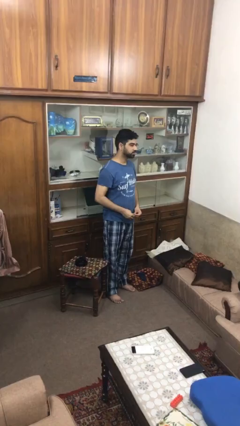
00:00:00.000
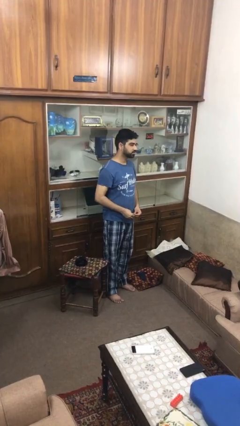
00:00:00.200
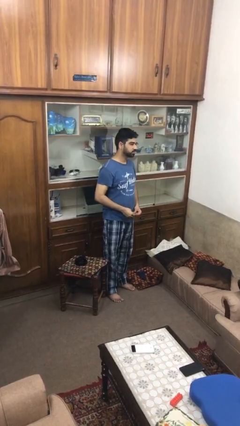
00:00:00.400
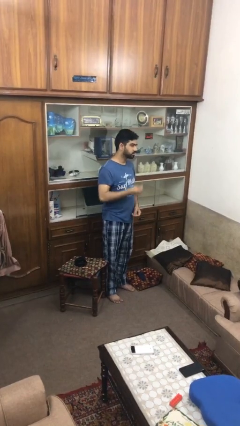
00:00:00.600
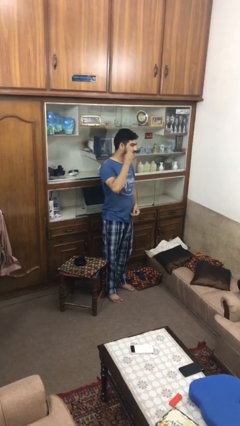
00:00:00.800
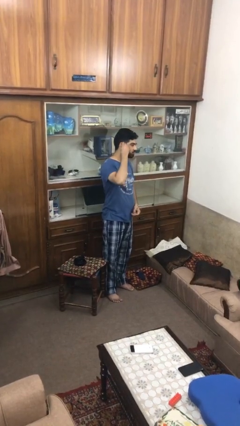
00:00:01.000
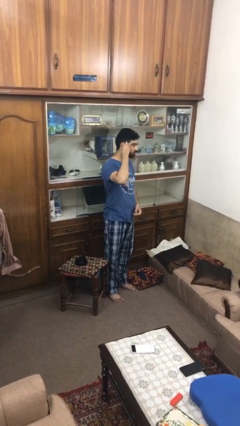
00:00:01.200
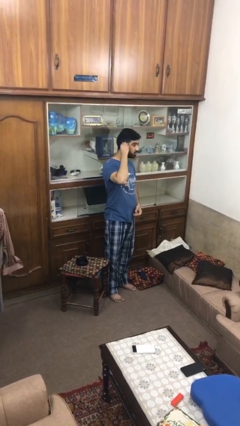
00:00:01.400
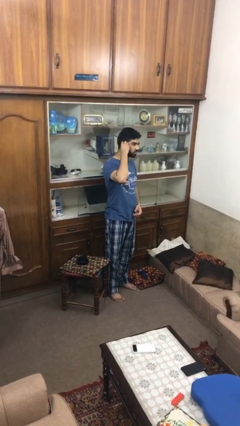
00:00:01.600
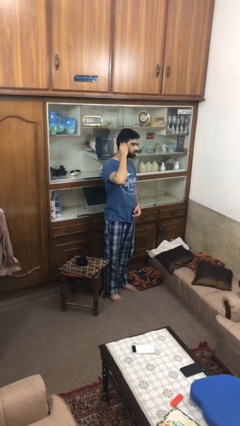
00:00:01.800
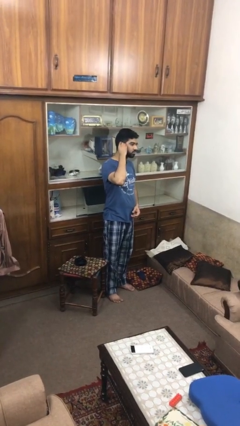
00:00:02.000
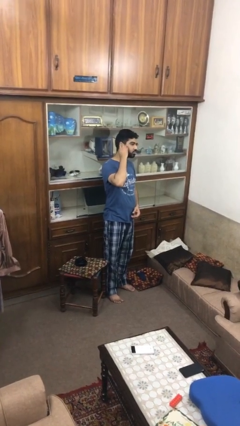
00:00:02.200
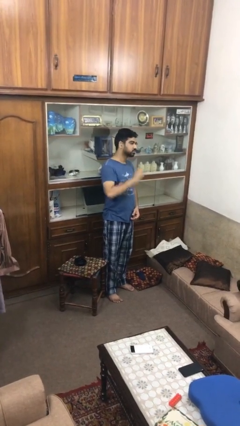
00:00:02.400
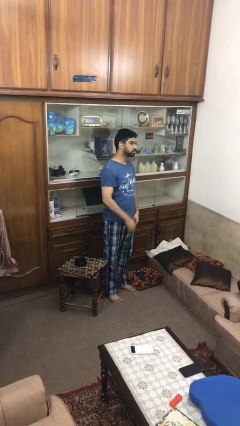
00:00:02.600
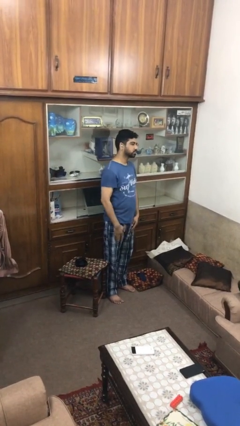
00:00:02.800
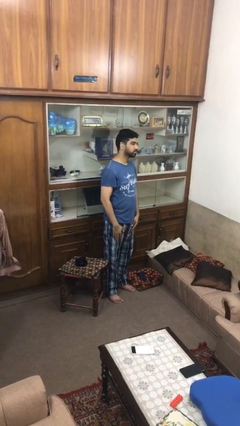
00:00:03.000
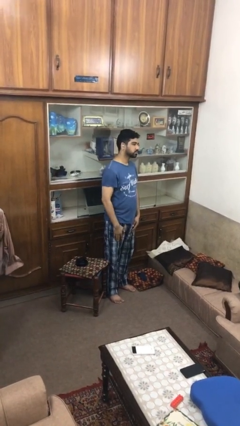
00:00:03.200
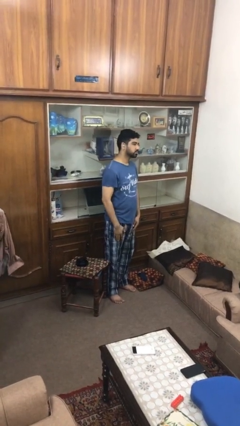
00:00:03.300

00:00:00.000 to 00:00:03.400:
person puts on earrings

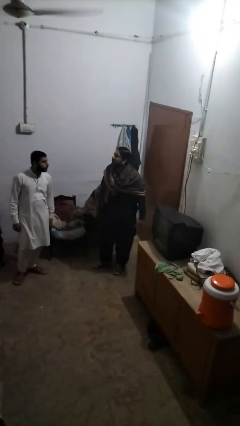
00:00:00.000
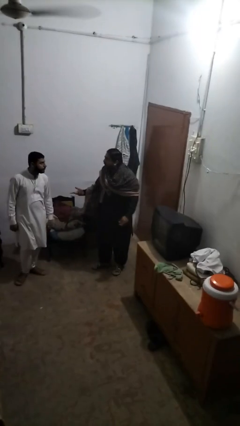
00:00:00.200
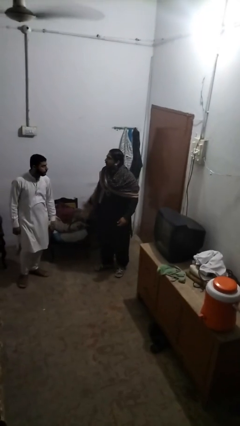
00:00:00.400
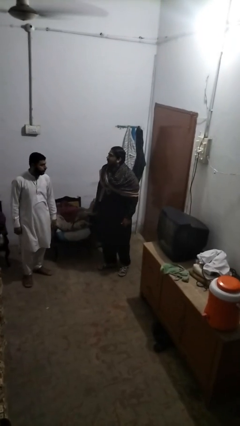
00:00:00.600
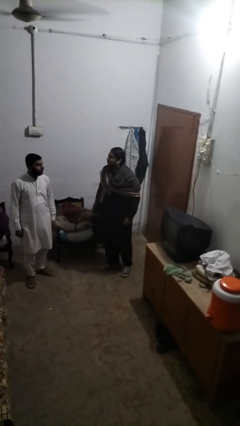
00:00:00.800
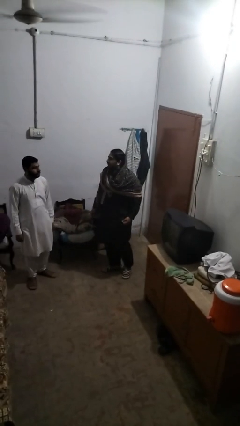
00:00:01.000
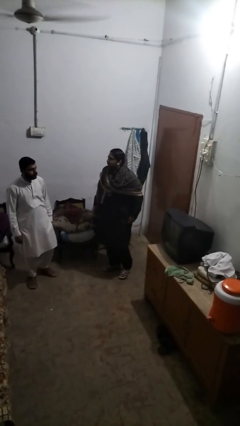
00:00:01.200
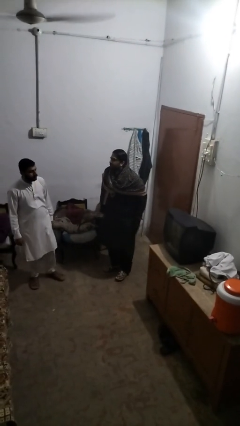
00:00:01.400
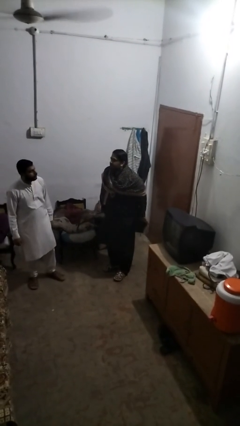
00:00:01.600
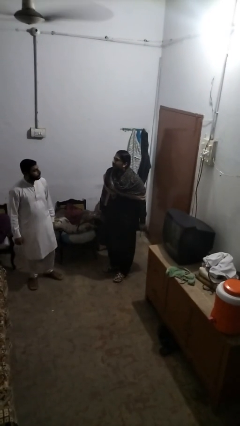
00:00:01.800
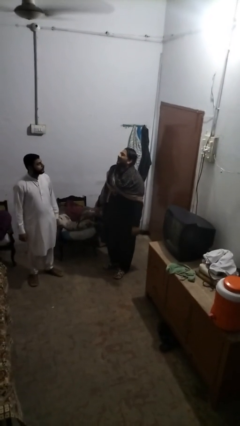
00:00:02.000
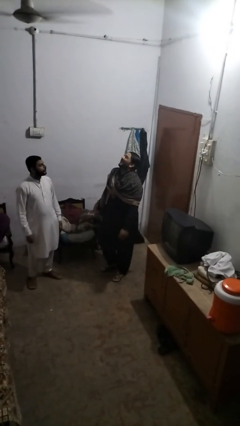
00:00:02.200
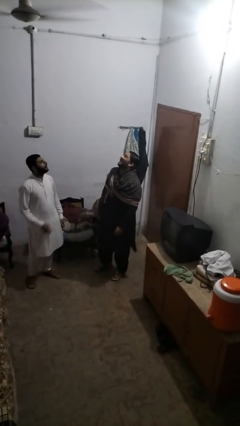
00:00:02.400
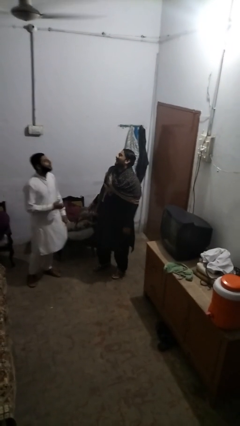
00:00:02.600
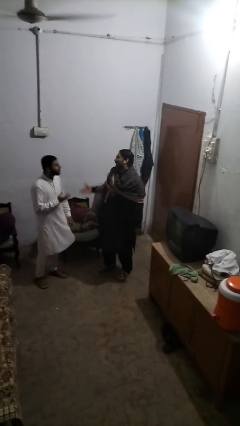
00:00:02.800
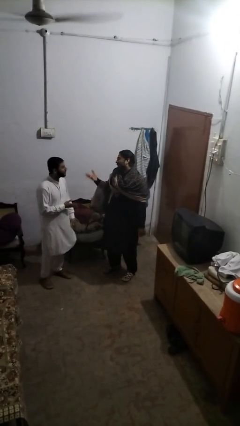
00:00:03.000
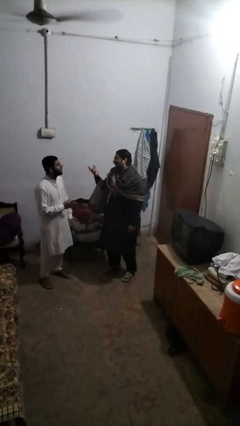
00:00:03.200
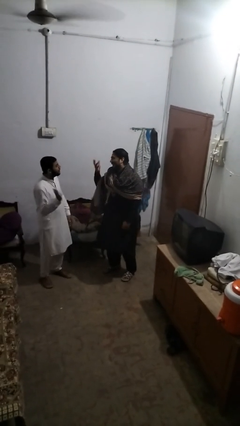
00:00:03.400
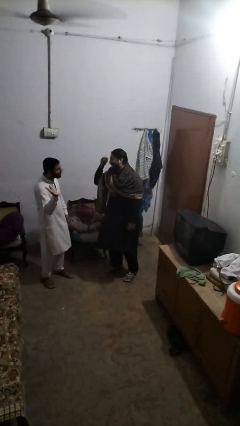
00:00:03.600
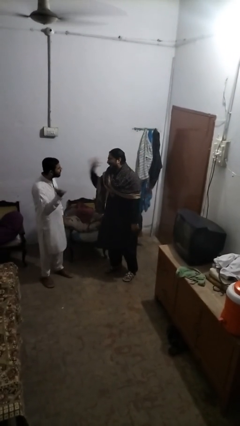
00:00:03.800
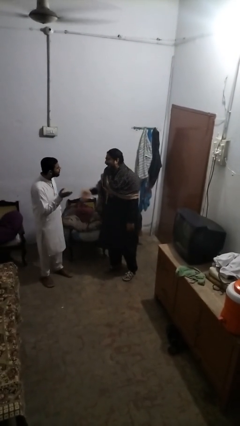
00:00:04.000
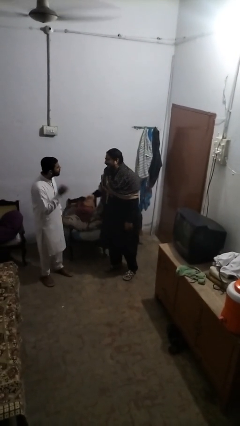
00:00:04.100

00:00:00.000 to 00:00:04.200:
person laughs with person

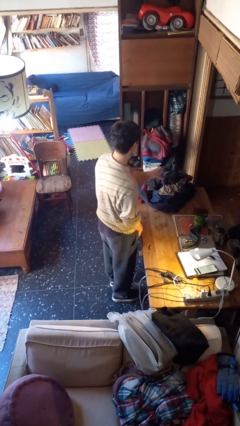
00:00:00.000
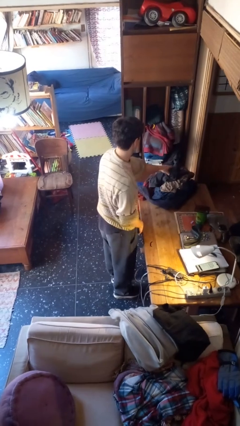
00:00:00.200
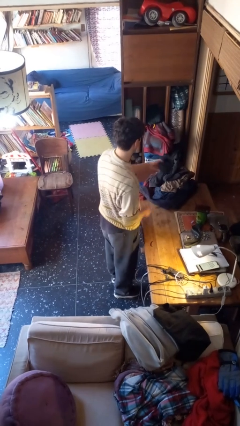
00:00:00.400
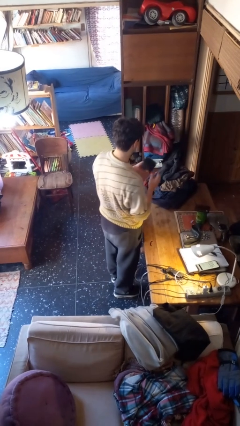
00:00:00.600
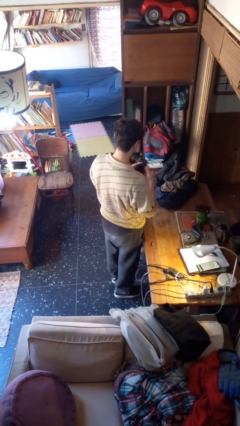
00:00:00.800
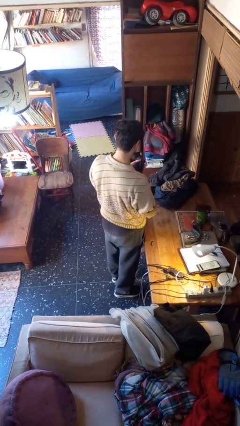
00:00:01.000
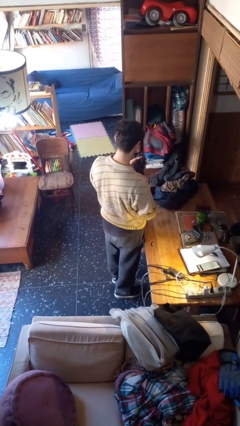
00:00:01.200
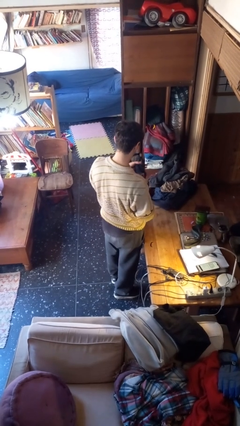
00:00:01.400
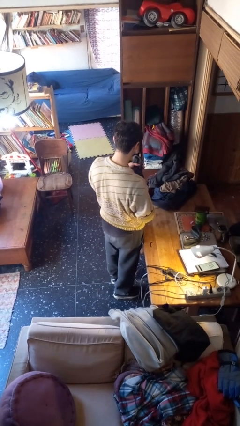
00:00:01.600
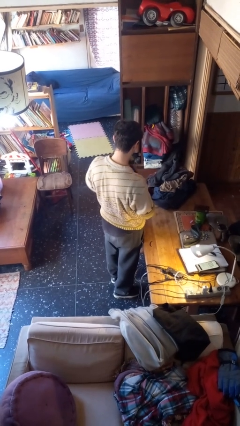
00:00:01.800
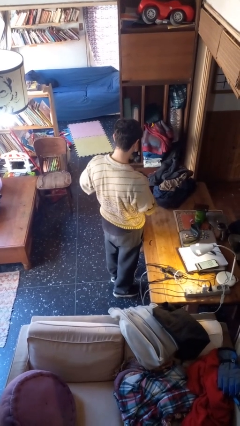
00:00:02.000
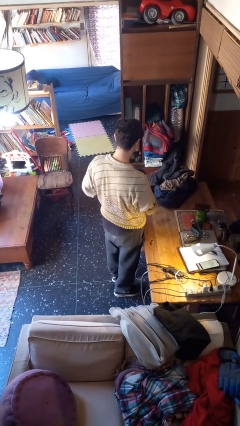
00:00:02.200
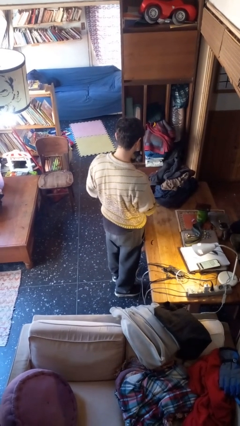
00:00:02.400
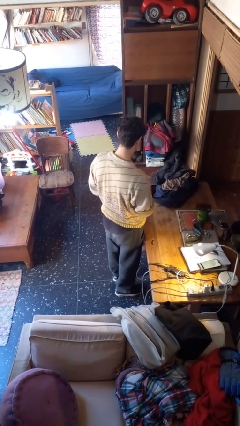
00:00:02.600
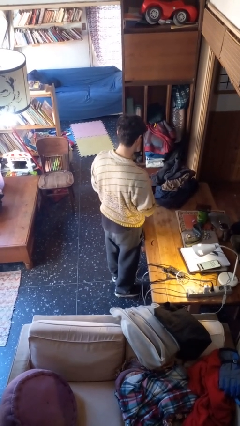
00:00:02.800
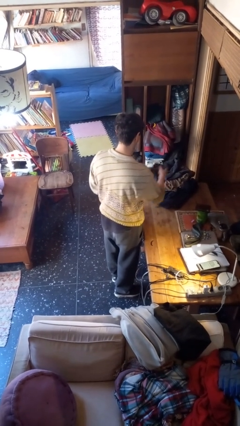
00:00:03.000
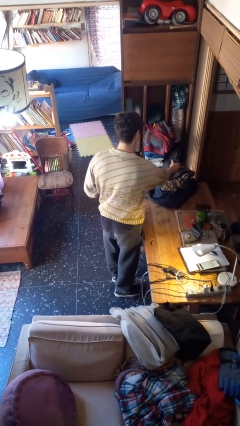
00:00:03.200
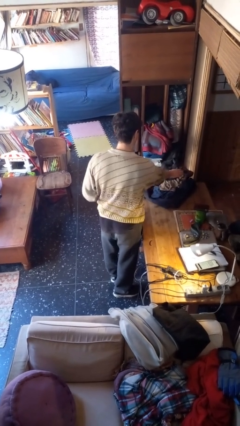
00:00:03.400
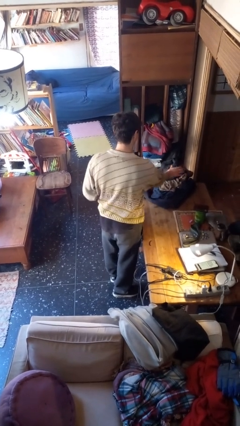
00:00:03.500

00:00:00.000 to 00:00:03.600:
person folds socks

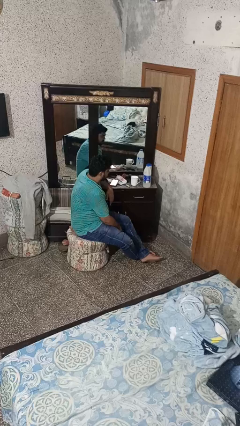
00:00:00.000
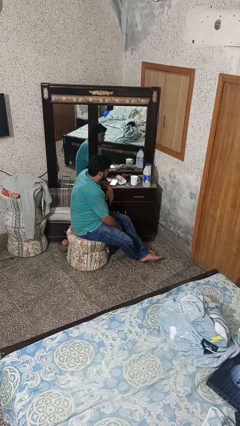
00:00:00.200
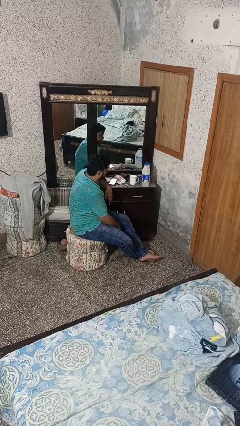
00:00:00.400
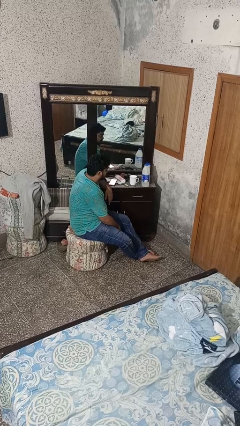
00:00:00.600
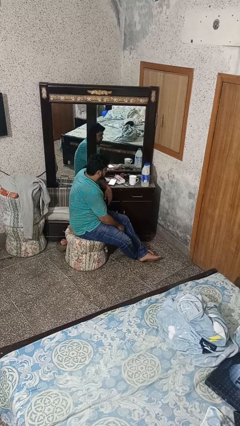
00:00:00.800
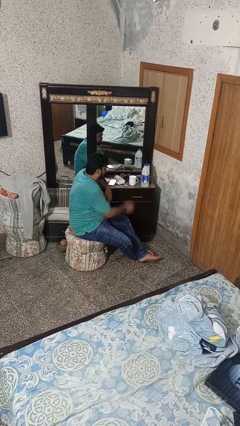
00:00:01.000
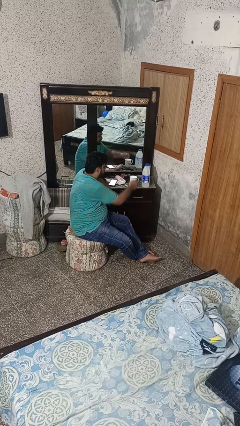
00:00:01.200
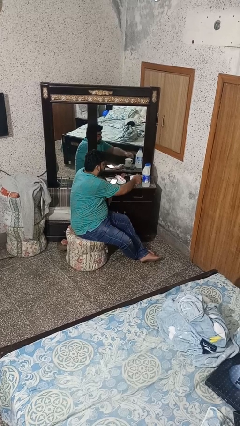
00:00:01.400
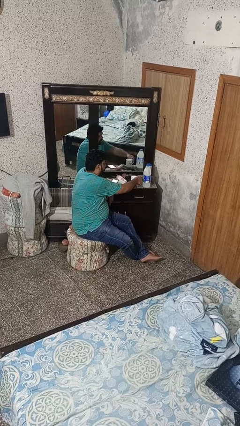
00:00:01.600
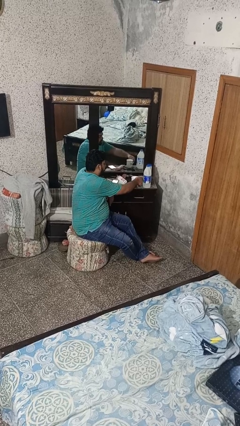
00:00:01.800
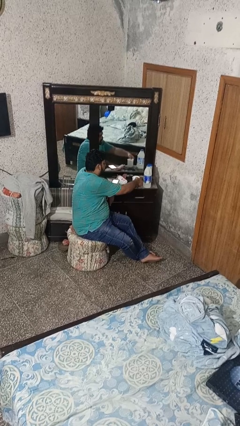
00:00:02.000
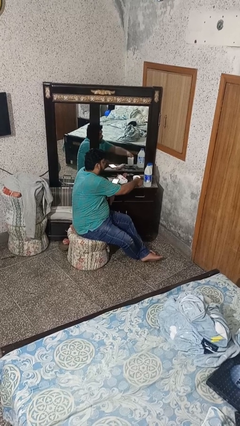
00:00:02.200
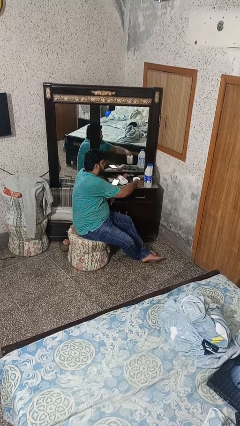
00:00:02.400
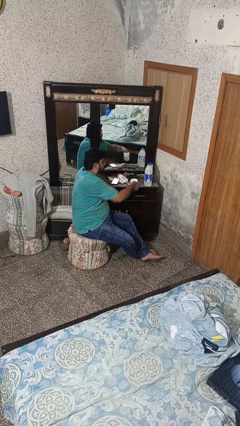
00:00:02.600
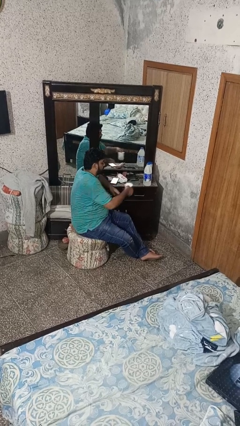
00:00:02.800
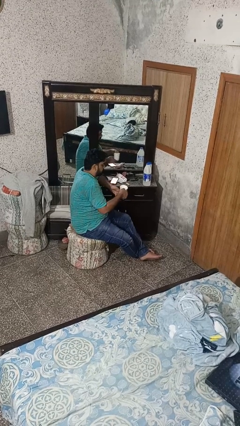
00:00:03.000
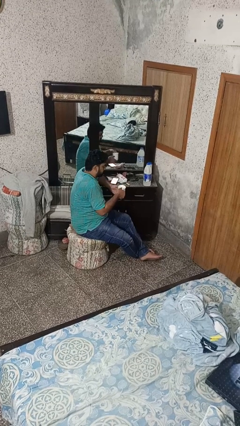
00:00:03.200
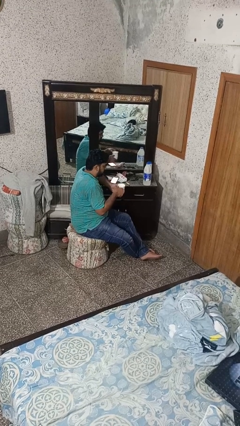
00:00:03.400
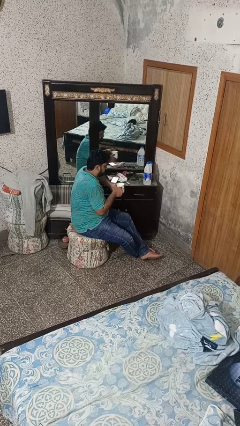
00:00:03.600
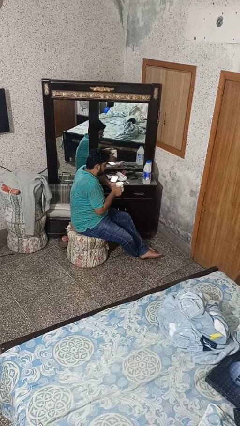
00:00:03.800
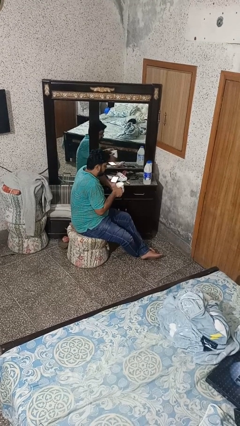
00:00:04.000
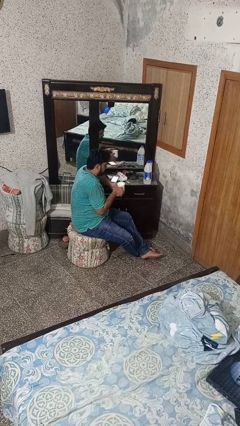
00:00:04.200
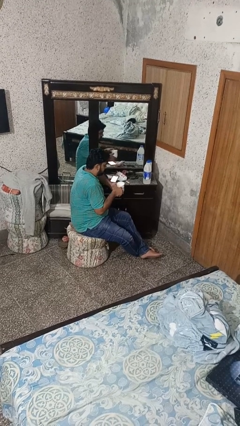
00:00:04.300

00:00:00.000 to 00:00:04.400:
person picks up object from table

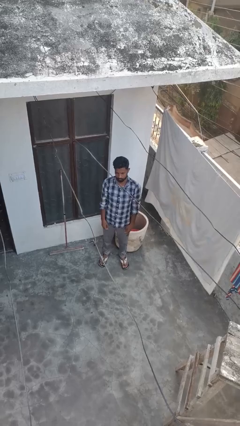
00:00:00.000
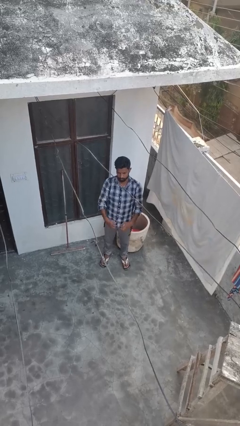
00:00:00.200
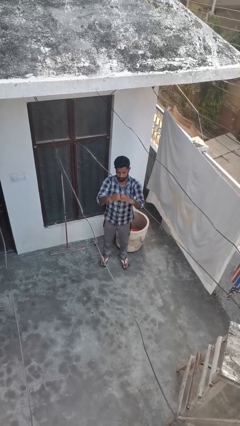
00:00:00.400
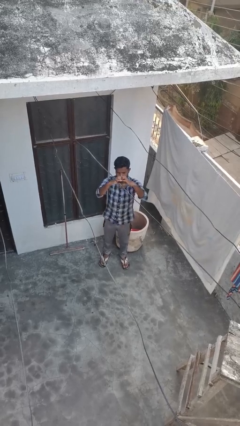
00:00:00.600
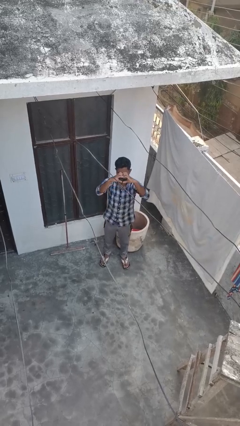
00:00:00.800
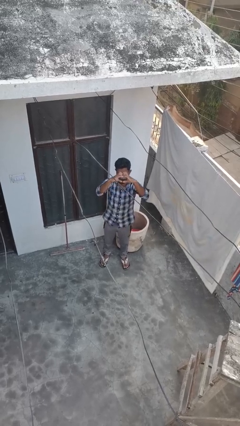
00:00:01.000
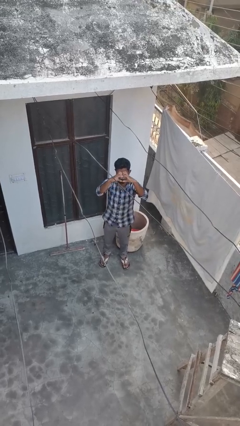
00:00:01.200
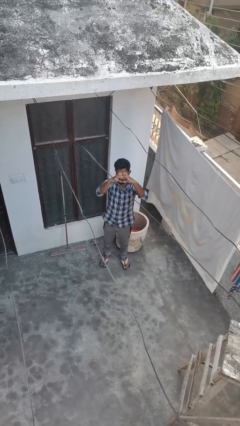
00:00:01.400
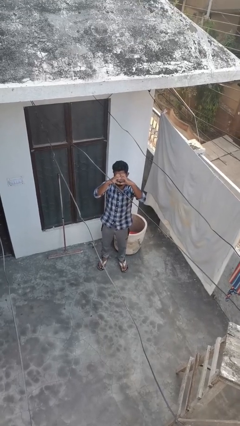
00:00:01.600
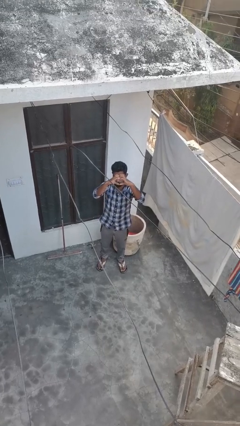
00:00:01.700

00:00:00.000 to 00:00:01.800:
person gestures heart
